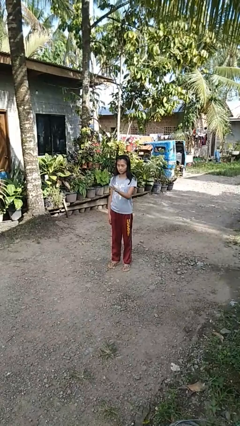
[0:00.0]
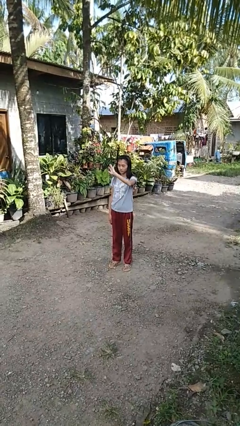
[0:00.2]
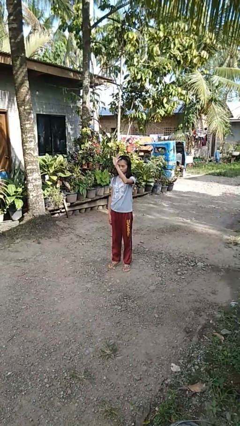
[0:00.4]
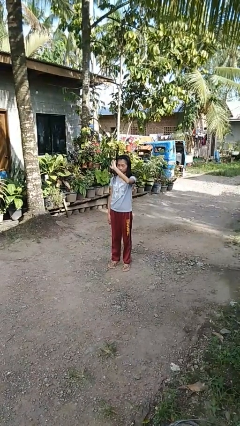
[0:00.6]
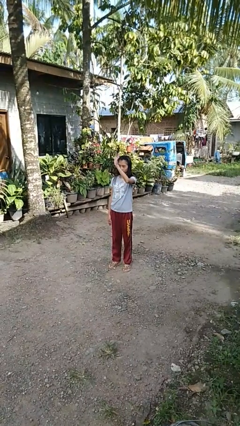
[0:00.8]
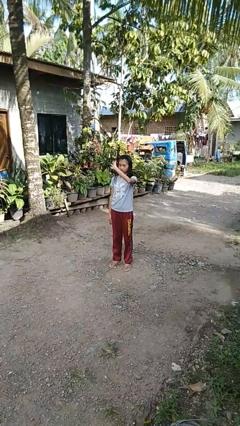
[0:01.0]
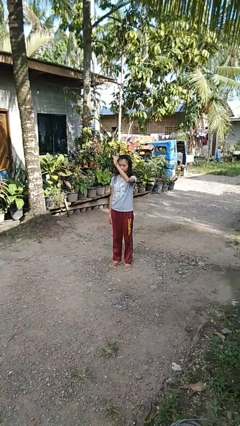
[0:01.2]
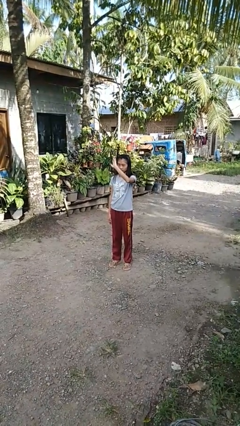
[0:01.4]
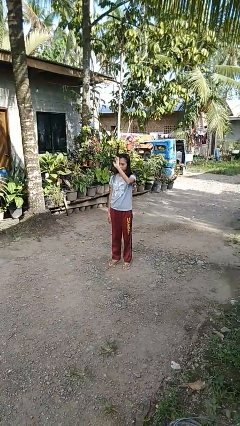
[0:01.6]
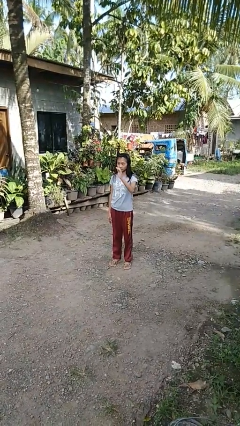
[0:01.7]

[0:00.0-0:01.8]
person waves at person

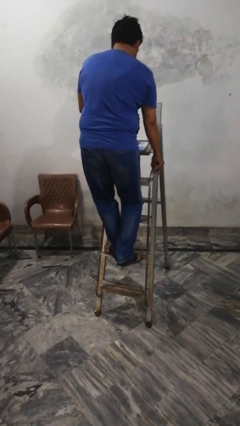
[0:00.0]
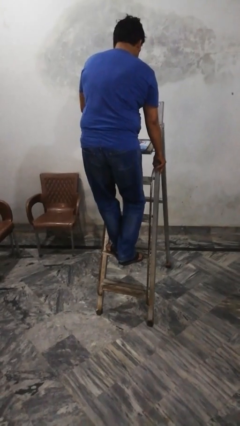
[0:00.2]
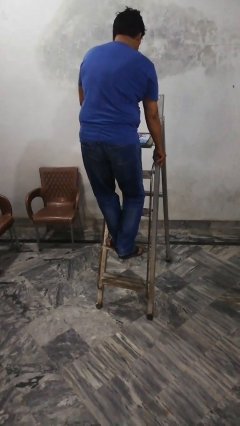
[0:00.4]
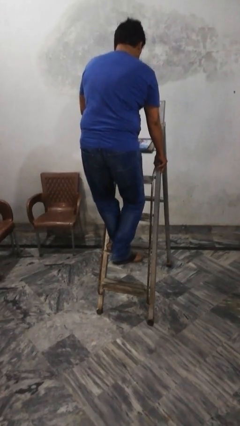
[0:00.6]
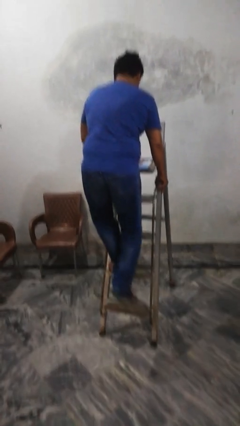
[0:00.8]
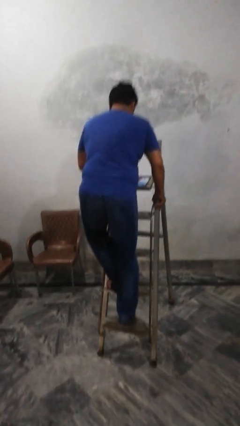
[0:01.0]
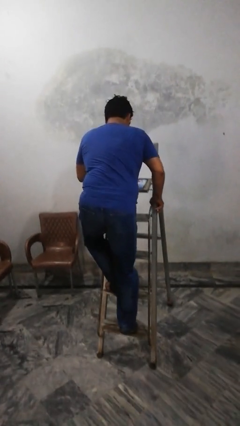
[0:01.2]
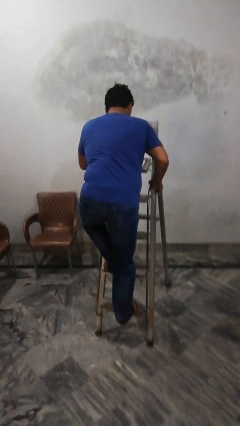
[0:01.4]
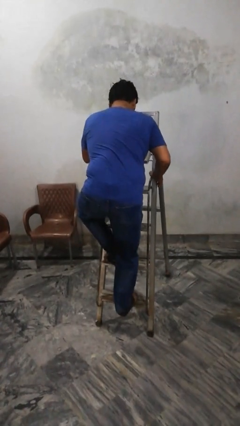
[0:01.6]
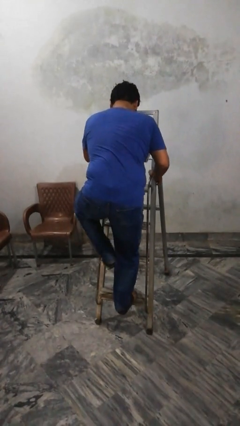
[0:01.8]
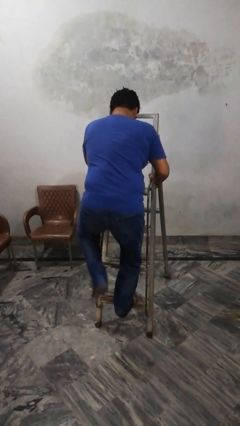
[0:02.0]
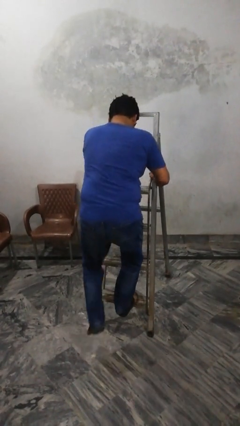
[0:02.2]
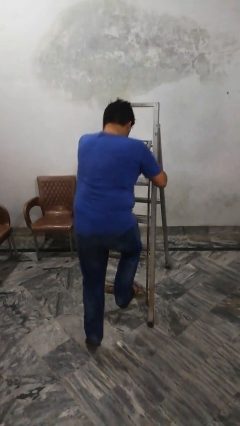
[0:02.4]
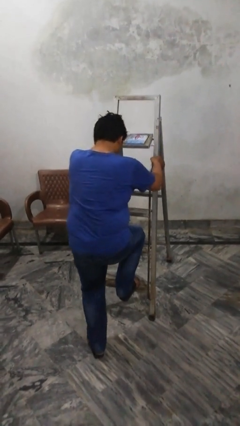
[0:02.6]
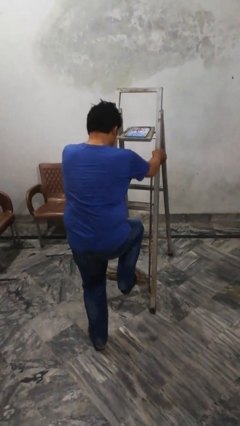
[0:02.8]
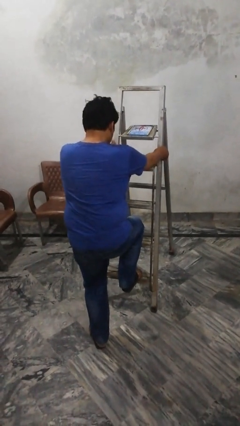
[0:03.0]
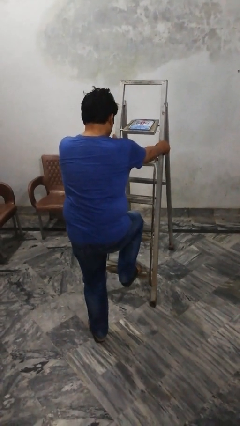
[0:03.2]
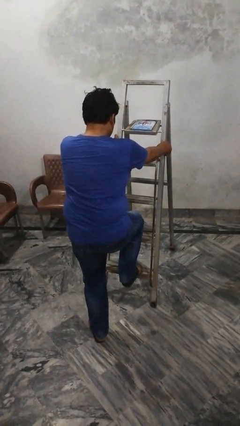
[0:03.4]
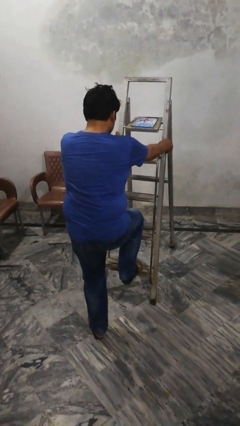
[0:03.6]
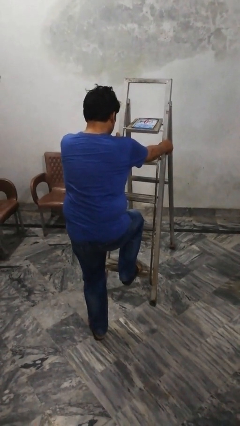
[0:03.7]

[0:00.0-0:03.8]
person climbs down ladder

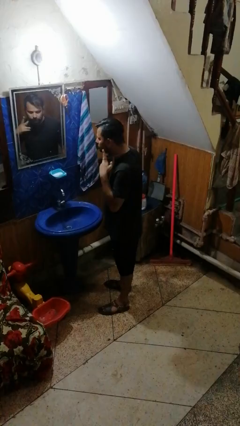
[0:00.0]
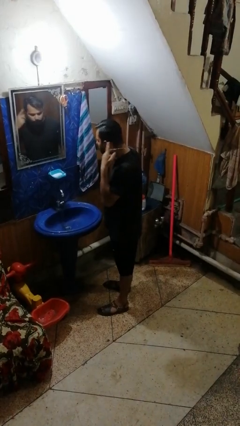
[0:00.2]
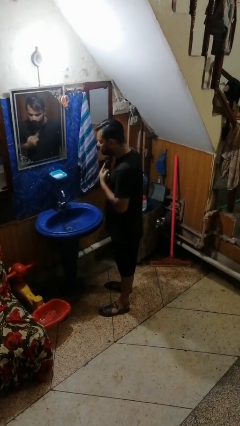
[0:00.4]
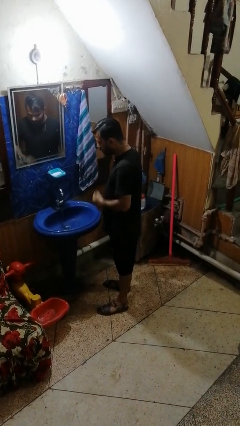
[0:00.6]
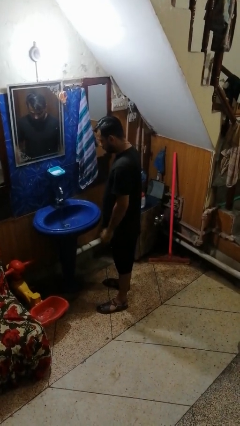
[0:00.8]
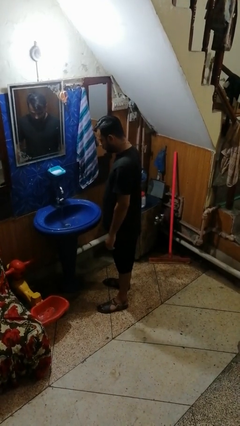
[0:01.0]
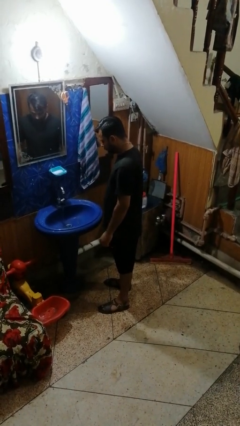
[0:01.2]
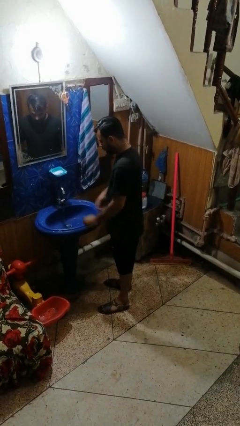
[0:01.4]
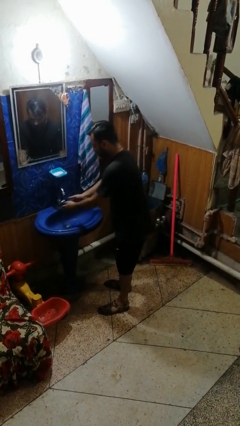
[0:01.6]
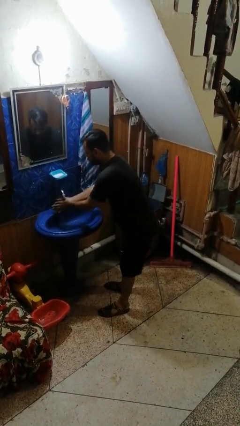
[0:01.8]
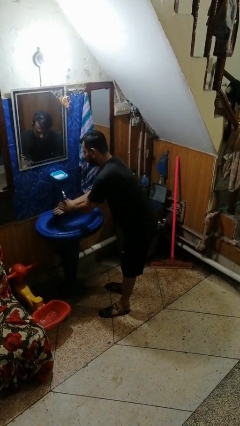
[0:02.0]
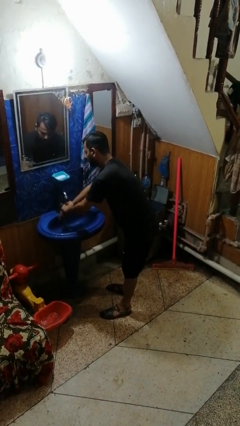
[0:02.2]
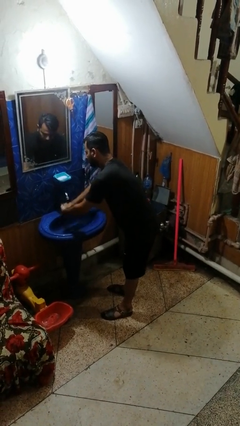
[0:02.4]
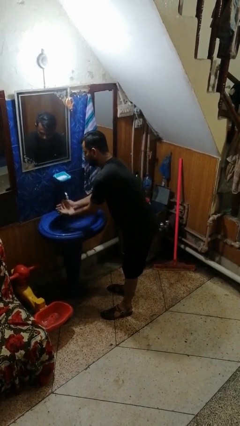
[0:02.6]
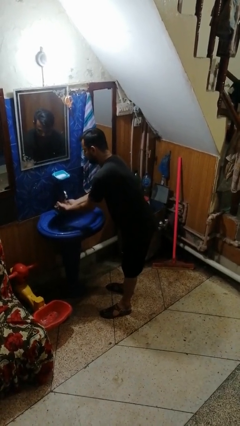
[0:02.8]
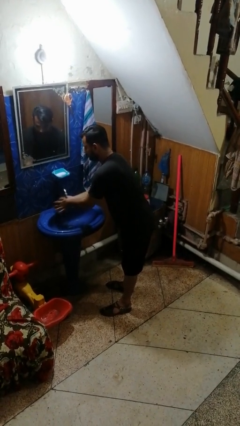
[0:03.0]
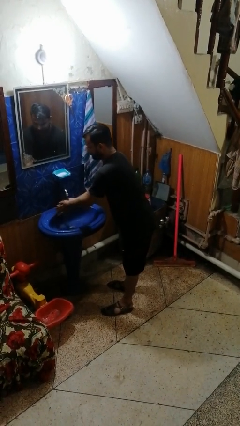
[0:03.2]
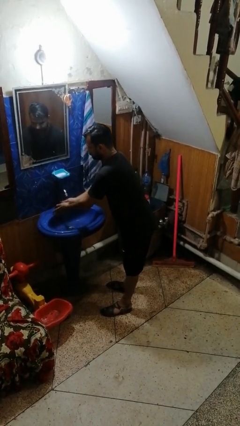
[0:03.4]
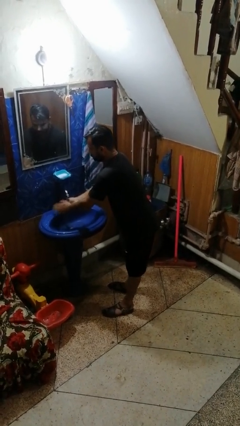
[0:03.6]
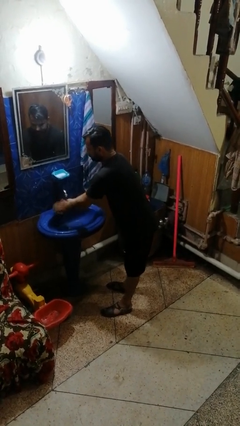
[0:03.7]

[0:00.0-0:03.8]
person washes hands

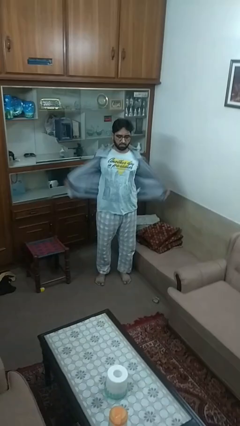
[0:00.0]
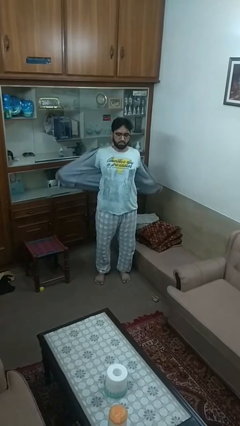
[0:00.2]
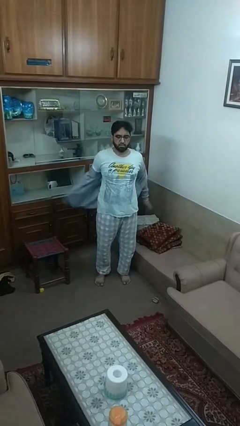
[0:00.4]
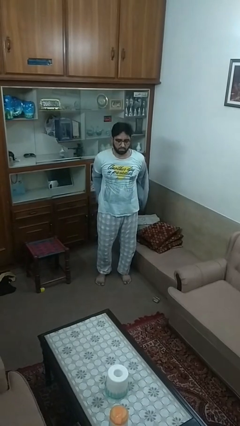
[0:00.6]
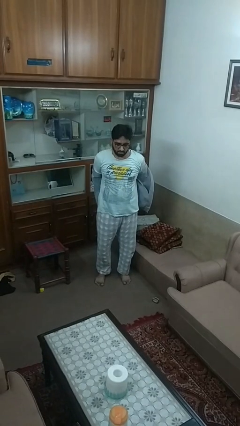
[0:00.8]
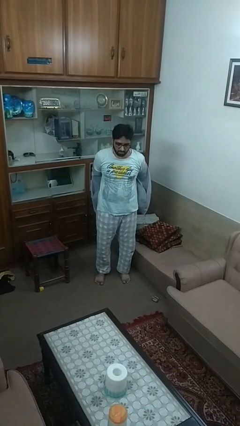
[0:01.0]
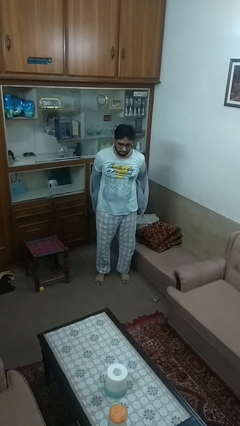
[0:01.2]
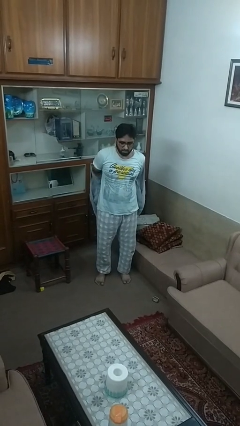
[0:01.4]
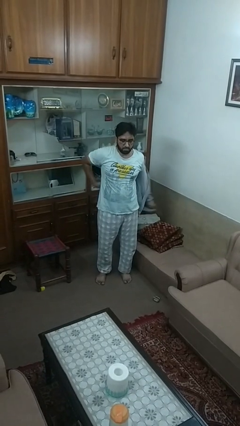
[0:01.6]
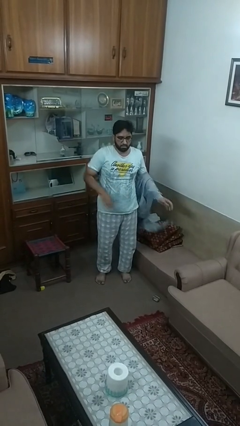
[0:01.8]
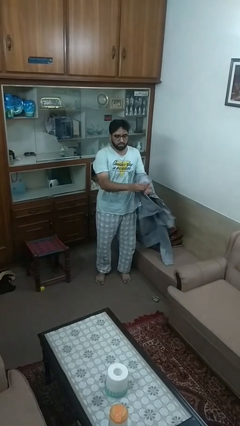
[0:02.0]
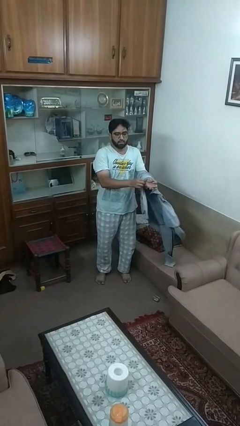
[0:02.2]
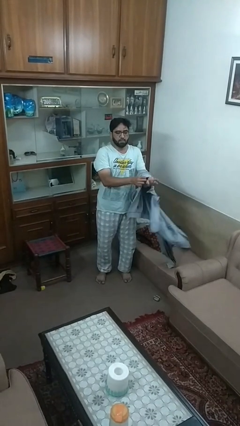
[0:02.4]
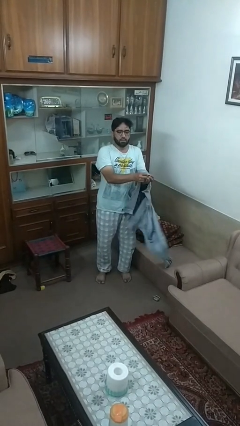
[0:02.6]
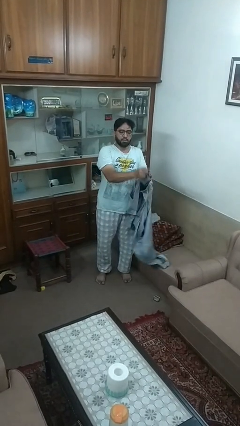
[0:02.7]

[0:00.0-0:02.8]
person takes off jacket

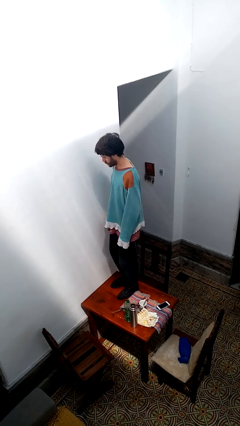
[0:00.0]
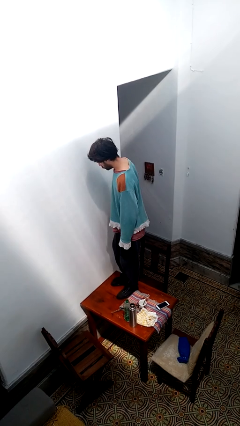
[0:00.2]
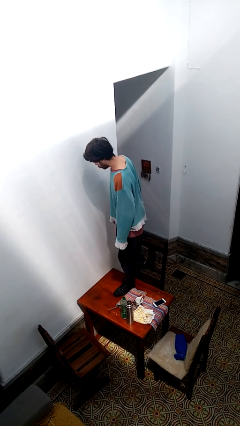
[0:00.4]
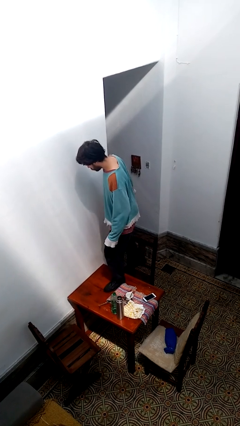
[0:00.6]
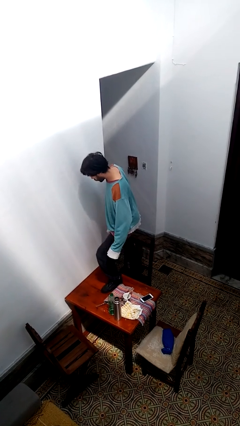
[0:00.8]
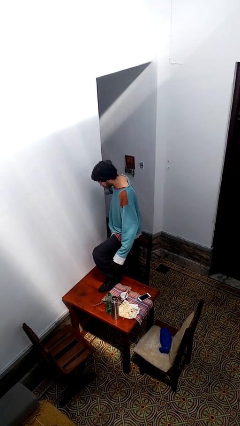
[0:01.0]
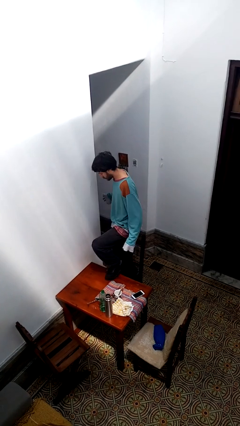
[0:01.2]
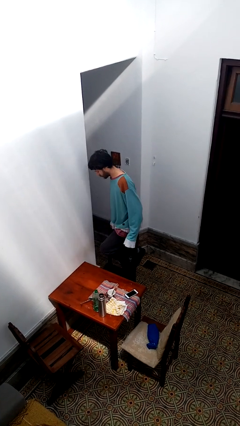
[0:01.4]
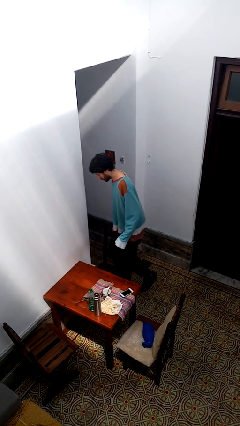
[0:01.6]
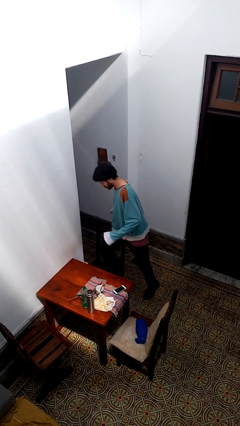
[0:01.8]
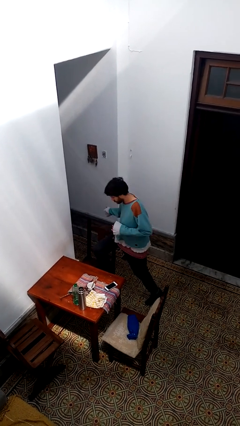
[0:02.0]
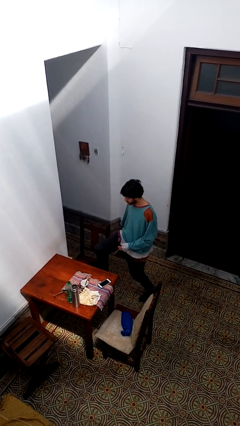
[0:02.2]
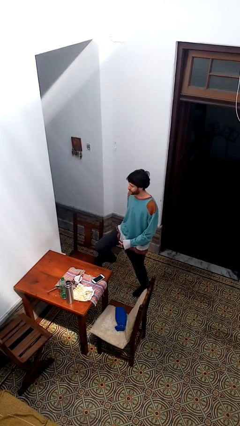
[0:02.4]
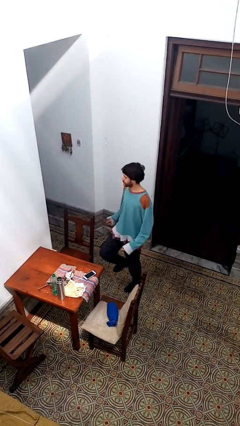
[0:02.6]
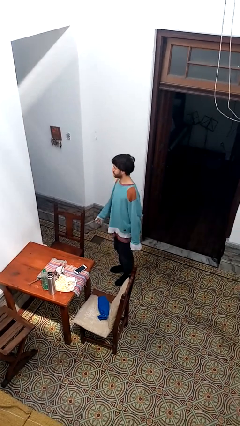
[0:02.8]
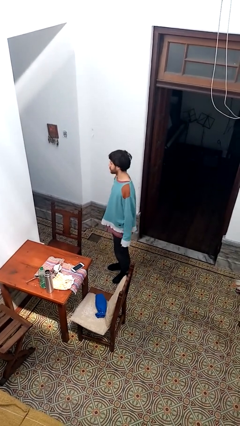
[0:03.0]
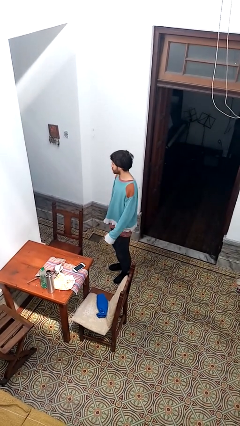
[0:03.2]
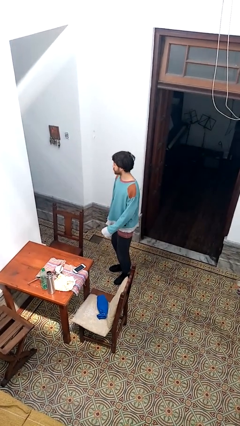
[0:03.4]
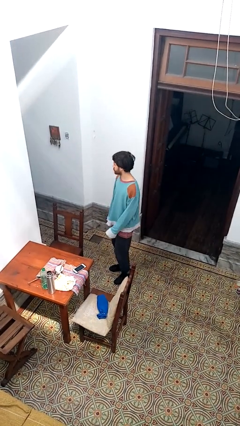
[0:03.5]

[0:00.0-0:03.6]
person climbs off table

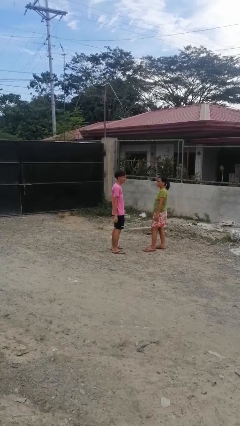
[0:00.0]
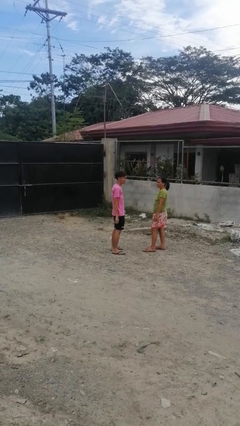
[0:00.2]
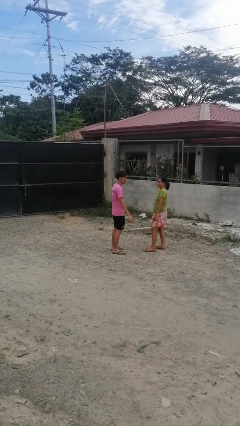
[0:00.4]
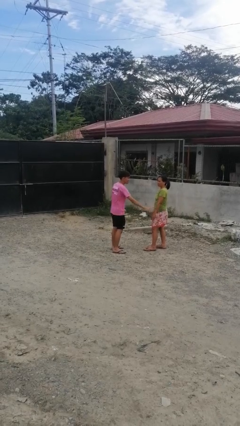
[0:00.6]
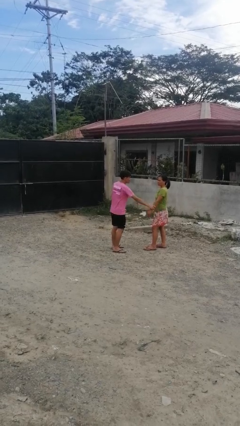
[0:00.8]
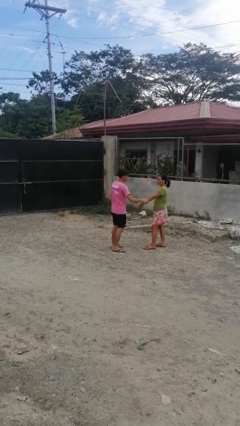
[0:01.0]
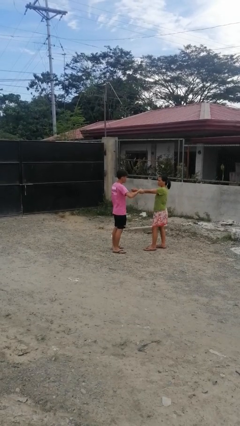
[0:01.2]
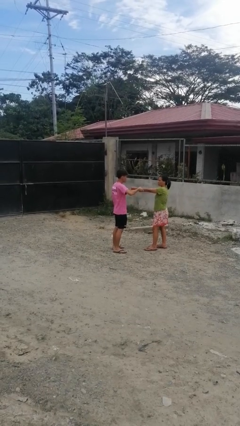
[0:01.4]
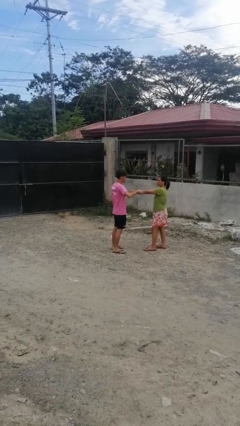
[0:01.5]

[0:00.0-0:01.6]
person grabs person by forearm
